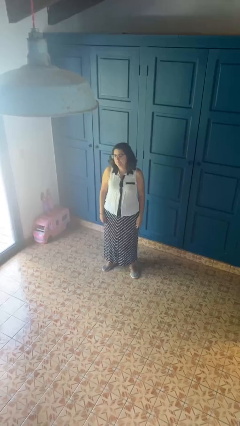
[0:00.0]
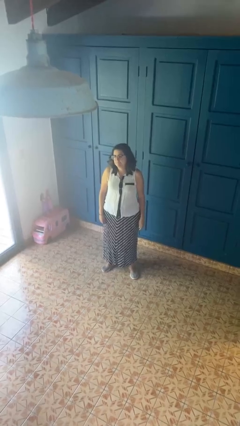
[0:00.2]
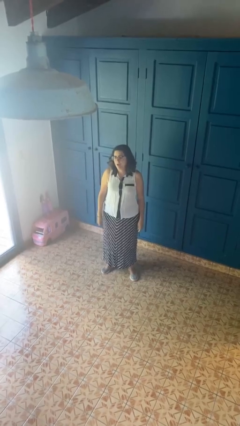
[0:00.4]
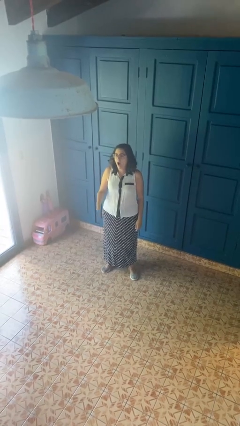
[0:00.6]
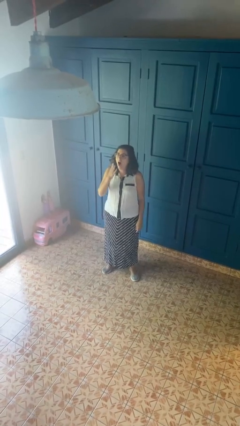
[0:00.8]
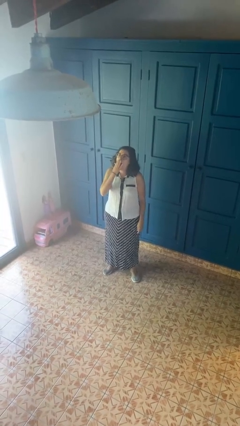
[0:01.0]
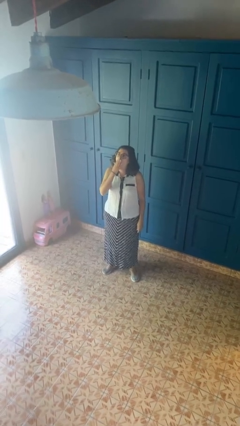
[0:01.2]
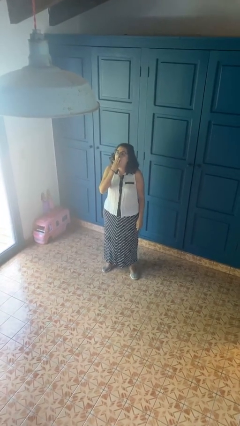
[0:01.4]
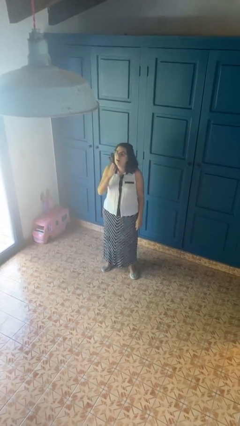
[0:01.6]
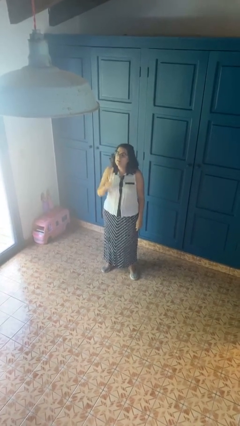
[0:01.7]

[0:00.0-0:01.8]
person yawns

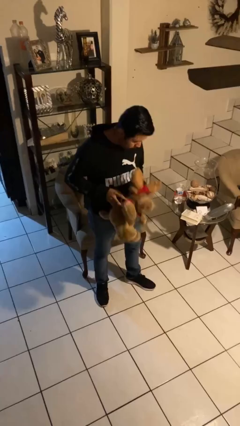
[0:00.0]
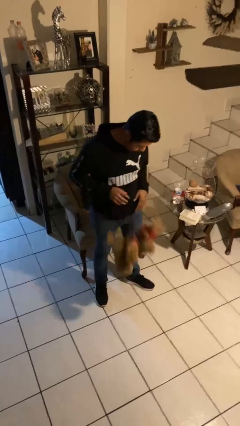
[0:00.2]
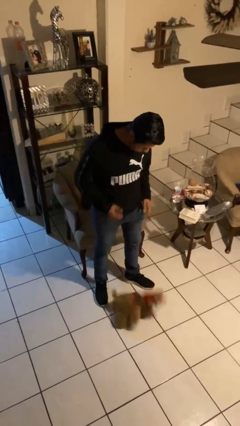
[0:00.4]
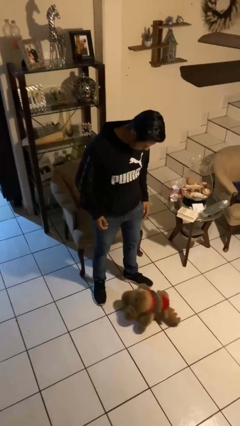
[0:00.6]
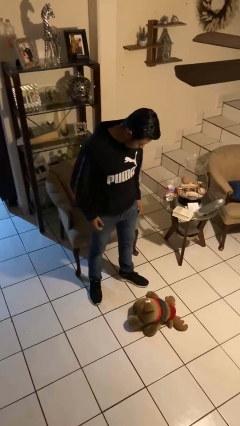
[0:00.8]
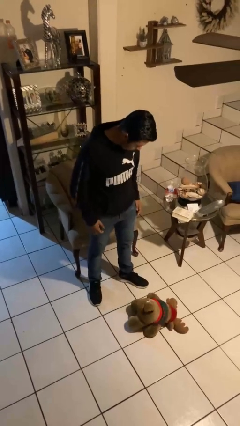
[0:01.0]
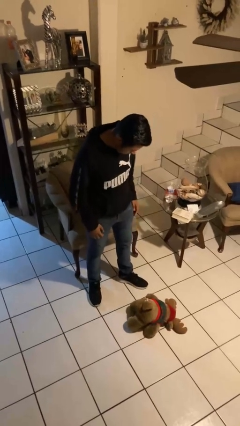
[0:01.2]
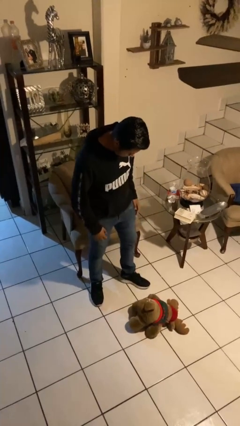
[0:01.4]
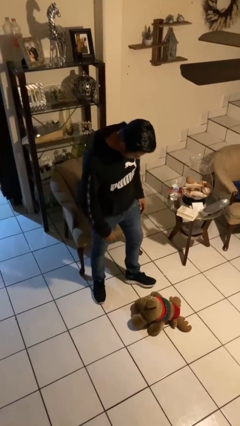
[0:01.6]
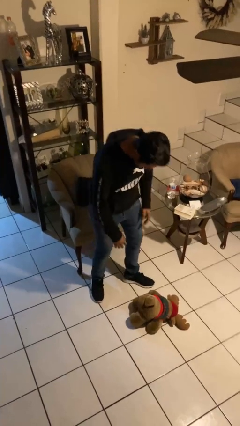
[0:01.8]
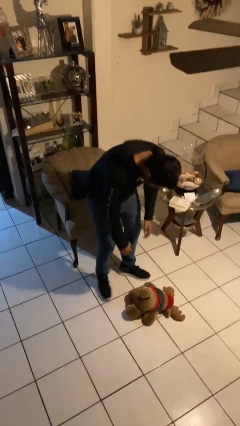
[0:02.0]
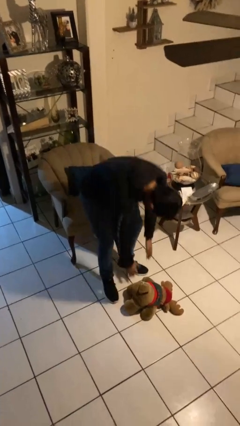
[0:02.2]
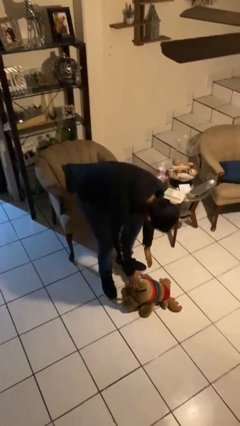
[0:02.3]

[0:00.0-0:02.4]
person drops object

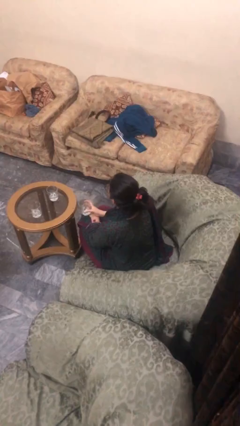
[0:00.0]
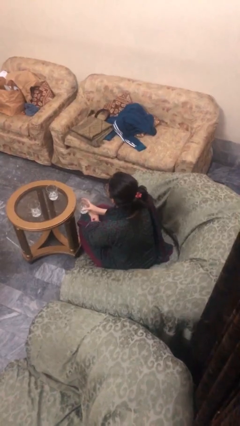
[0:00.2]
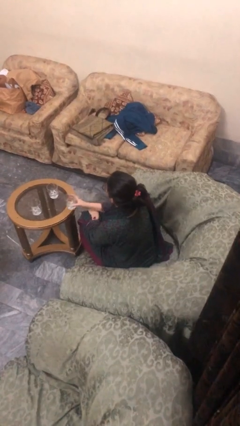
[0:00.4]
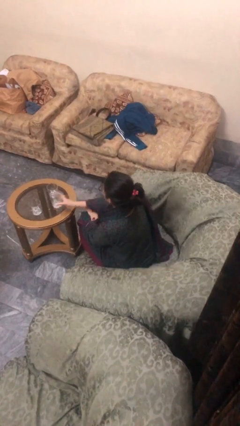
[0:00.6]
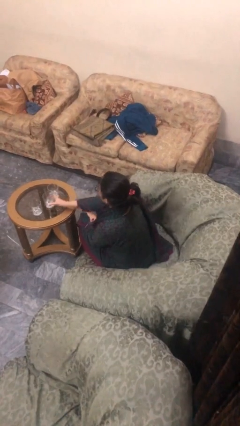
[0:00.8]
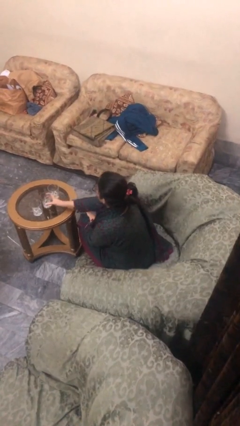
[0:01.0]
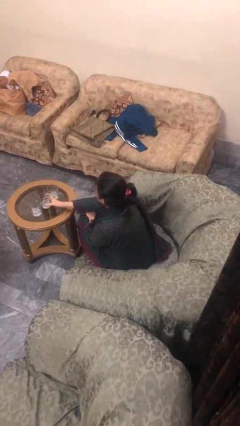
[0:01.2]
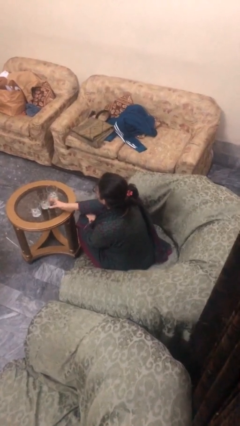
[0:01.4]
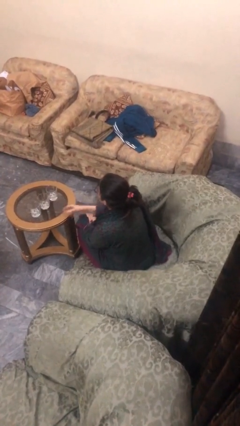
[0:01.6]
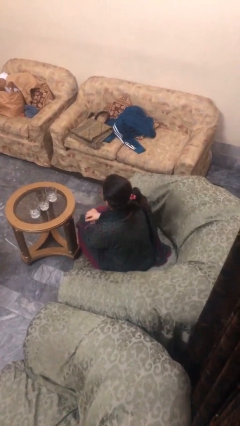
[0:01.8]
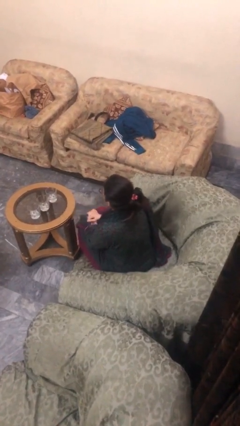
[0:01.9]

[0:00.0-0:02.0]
person puts down object on table

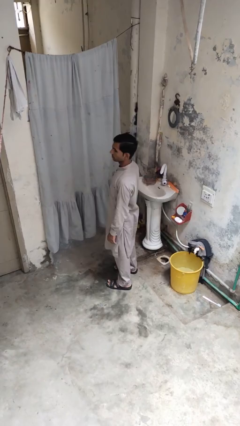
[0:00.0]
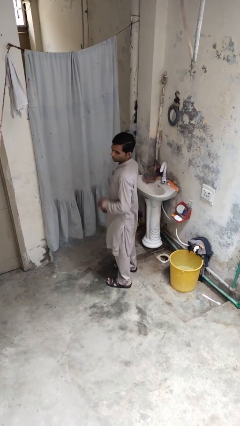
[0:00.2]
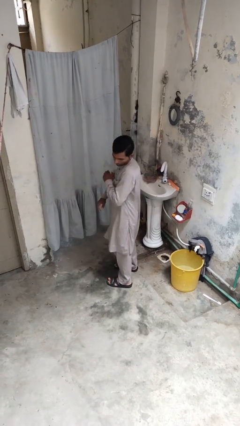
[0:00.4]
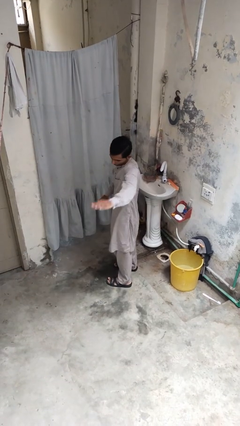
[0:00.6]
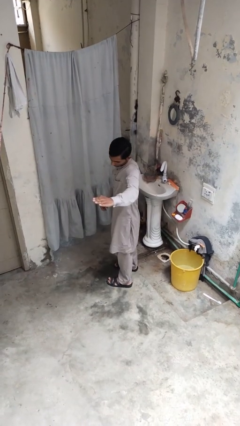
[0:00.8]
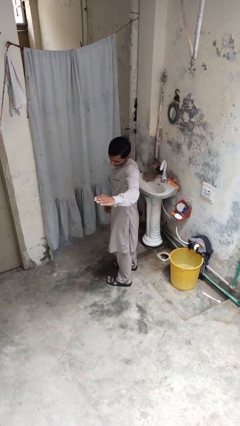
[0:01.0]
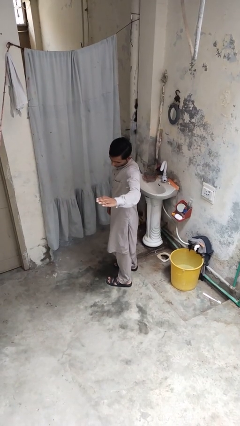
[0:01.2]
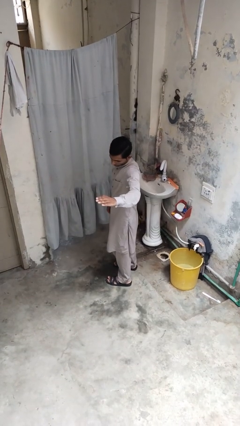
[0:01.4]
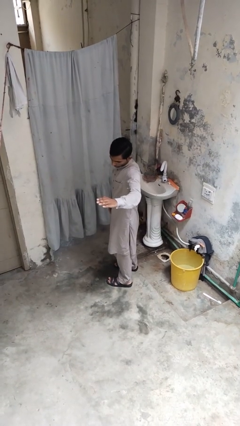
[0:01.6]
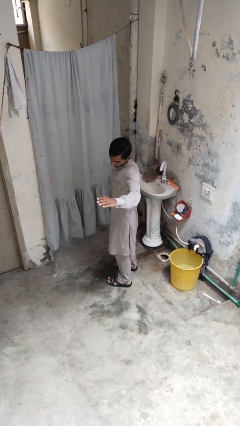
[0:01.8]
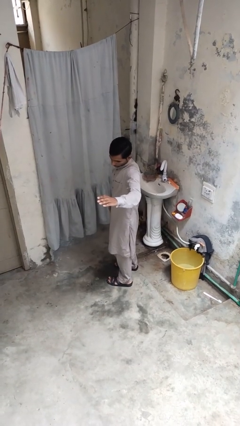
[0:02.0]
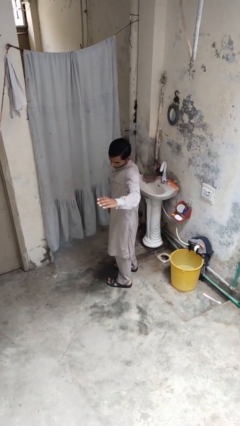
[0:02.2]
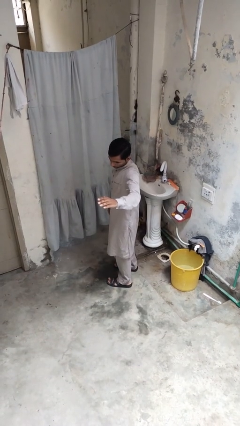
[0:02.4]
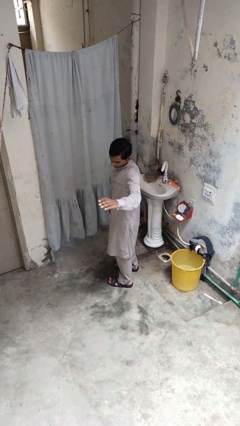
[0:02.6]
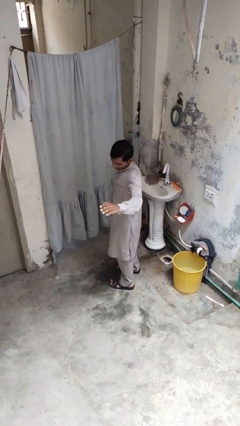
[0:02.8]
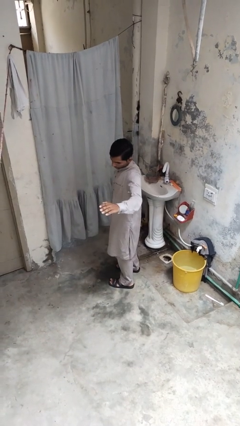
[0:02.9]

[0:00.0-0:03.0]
person karate chop

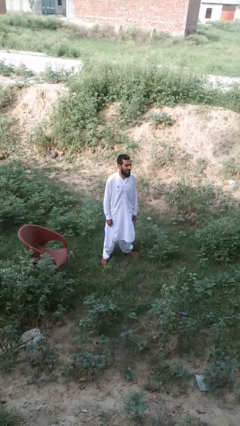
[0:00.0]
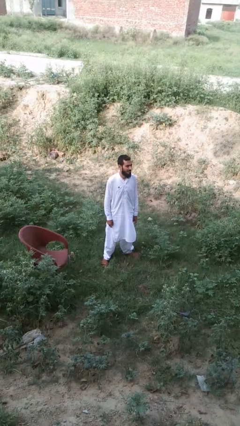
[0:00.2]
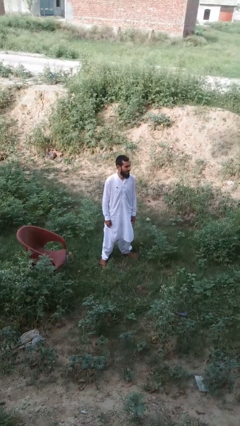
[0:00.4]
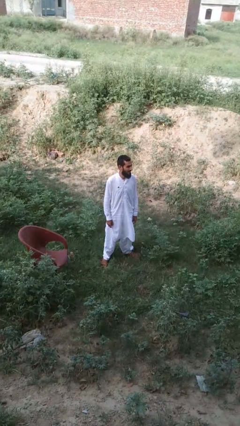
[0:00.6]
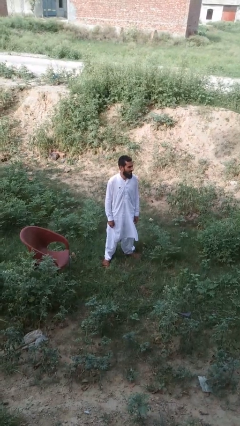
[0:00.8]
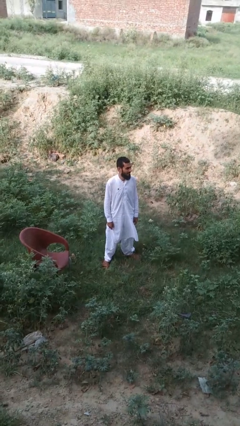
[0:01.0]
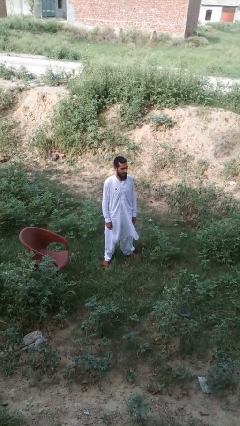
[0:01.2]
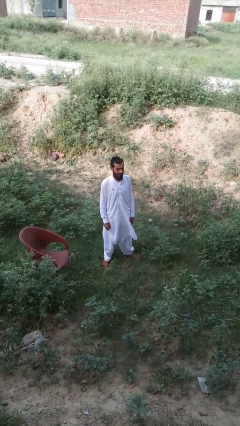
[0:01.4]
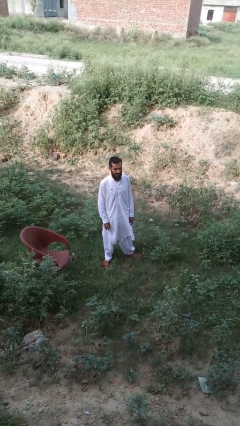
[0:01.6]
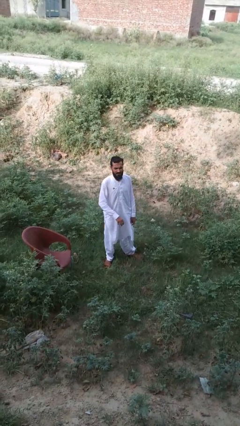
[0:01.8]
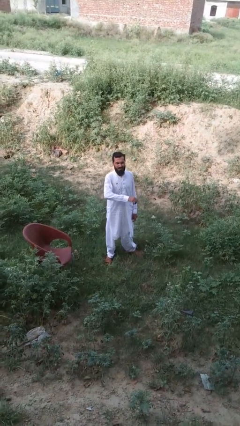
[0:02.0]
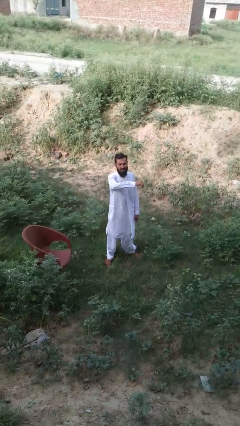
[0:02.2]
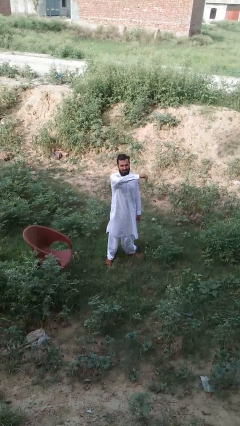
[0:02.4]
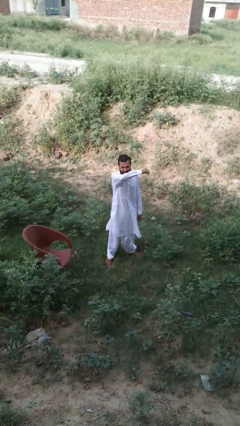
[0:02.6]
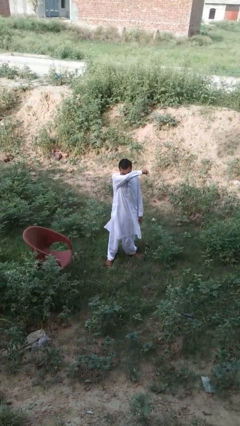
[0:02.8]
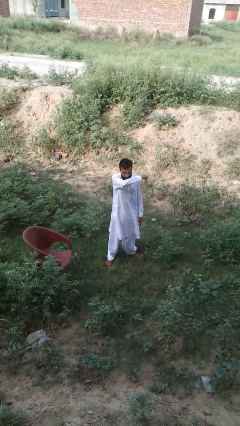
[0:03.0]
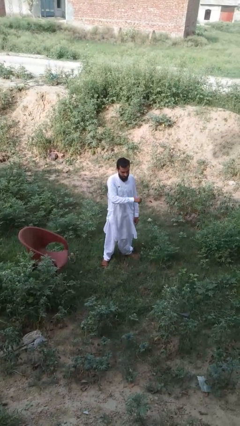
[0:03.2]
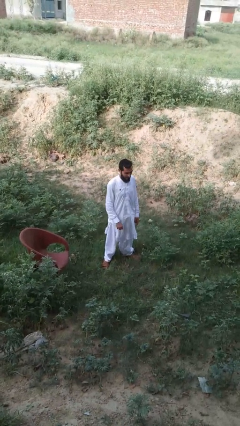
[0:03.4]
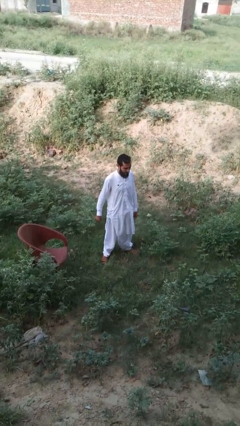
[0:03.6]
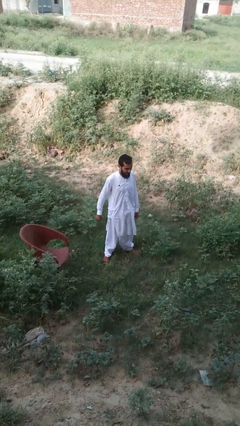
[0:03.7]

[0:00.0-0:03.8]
person sneezes into arm

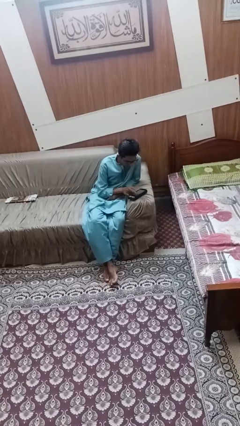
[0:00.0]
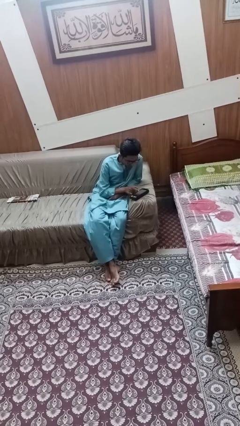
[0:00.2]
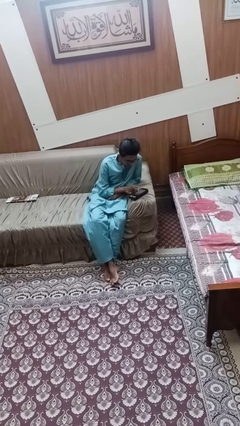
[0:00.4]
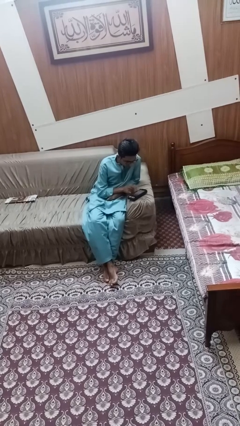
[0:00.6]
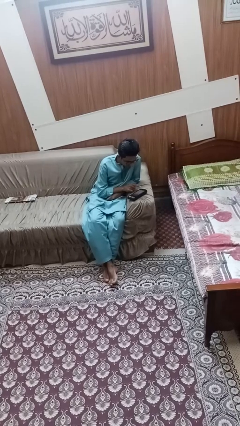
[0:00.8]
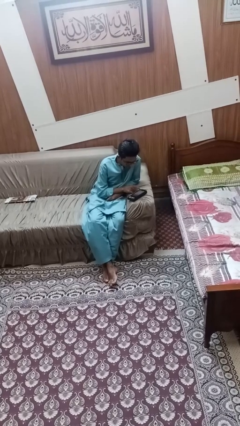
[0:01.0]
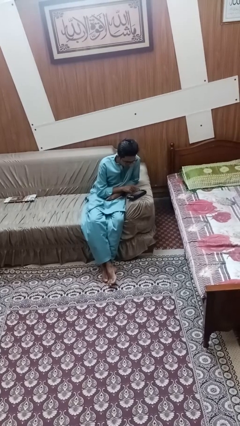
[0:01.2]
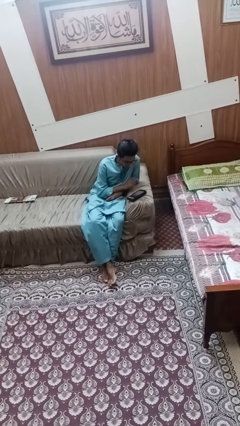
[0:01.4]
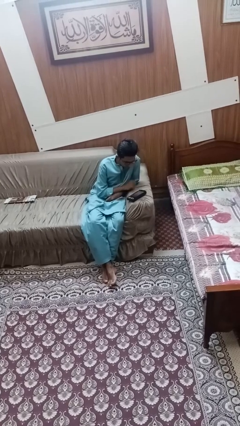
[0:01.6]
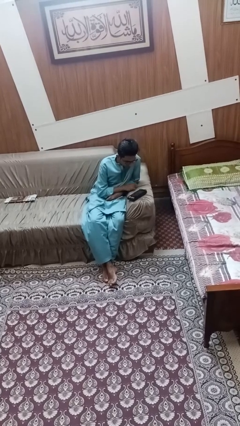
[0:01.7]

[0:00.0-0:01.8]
person interacts with tablet

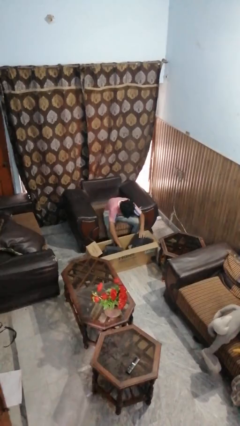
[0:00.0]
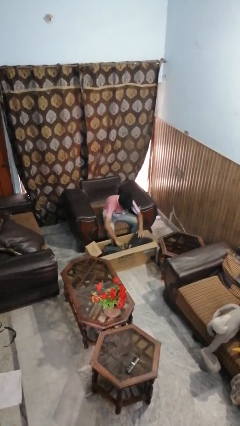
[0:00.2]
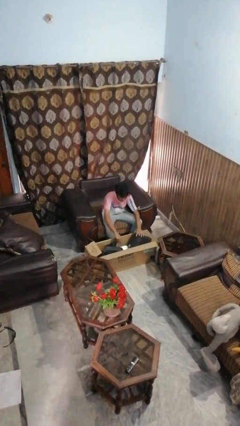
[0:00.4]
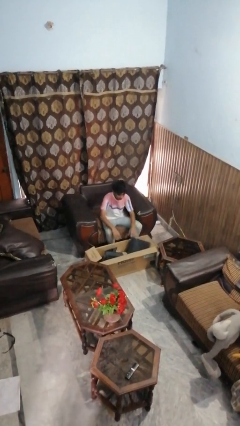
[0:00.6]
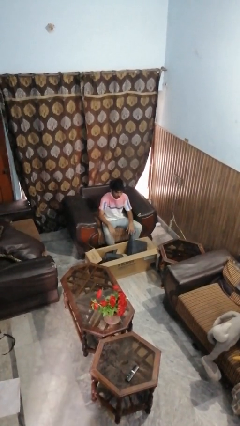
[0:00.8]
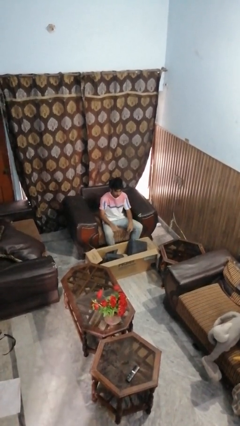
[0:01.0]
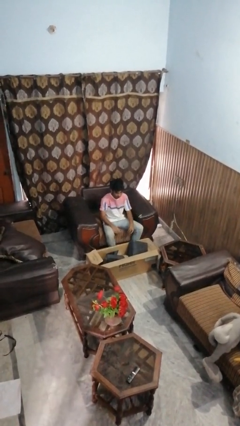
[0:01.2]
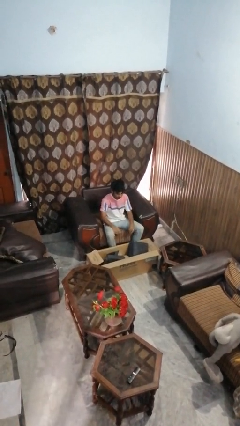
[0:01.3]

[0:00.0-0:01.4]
person searches in box

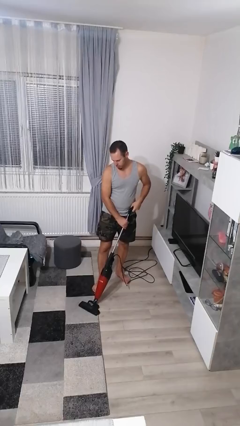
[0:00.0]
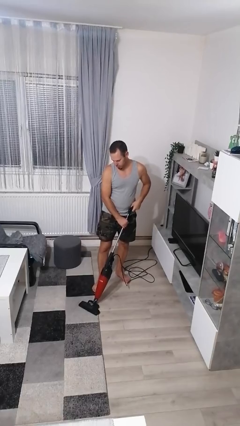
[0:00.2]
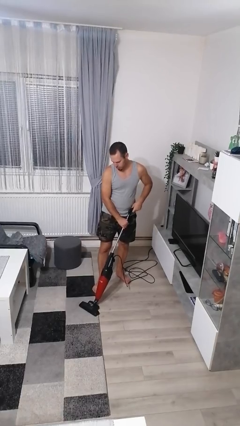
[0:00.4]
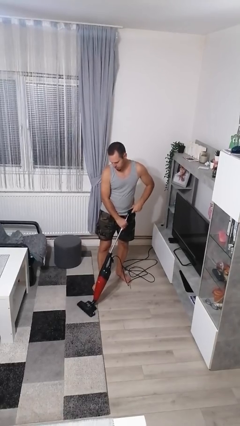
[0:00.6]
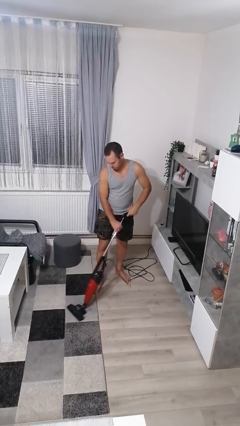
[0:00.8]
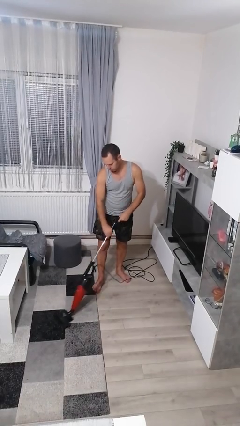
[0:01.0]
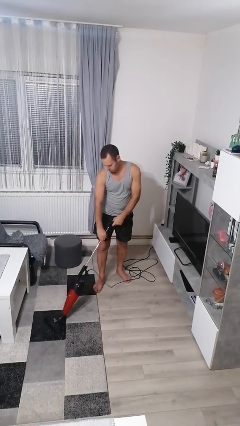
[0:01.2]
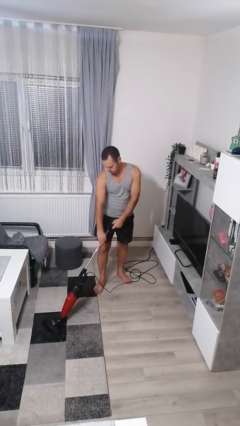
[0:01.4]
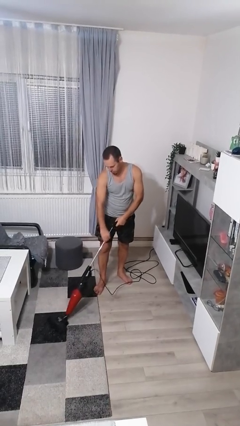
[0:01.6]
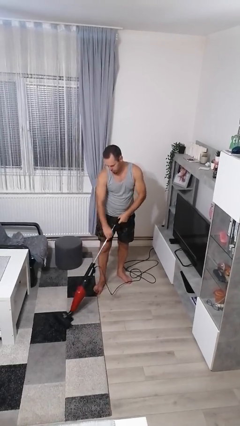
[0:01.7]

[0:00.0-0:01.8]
person vacuums carpet